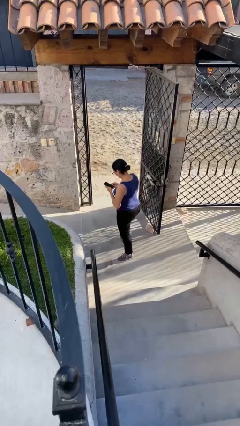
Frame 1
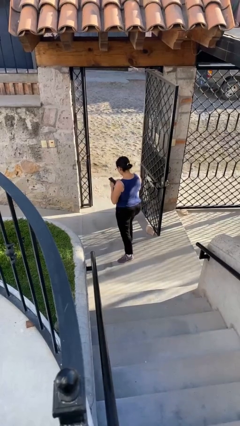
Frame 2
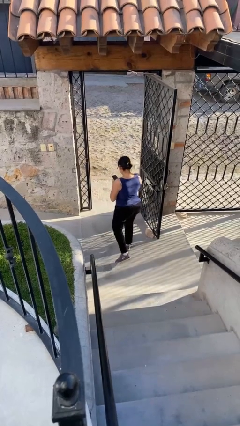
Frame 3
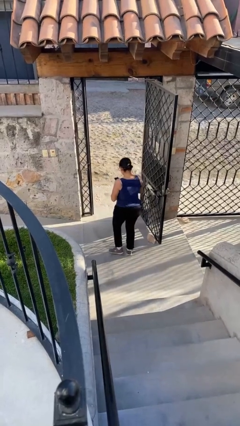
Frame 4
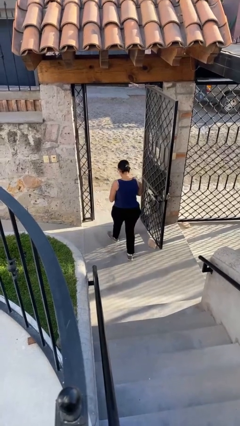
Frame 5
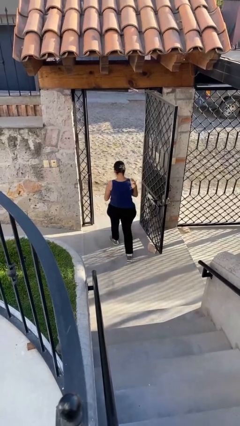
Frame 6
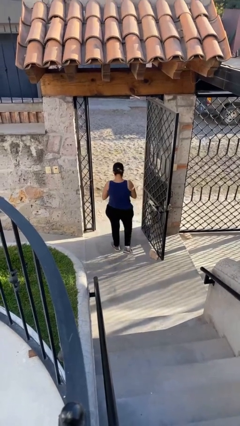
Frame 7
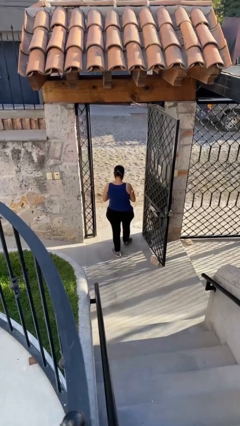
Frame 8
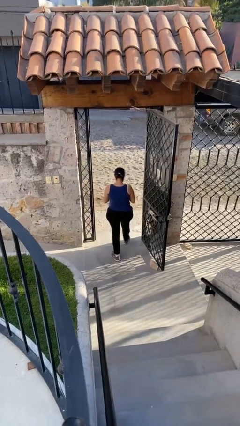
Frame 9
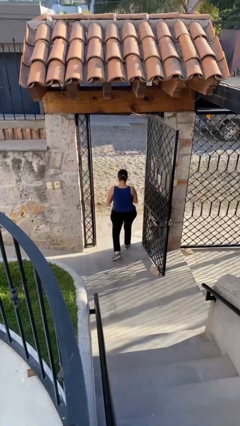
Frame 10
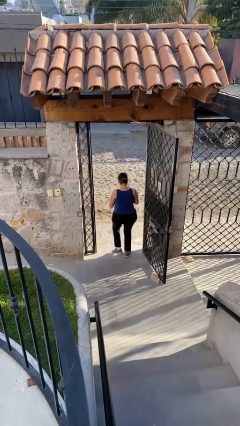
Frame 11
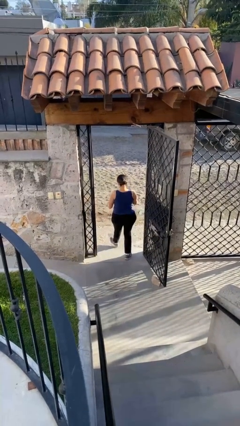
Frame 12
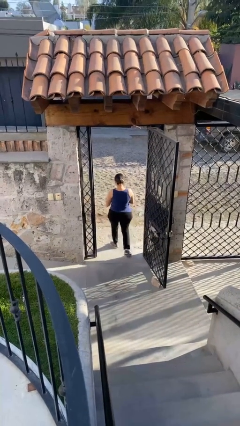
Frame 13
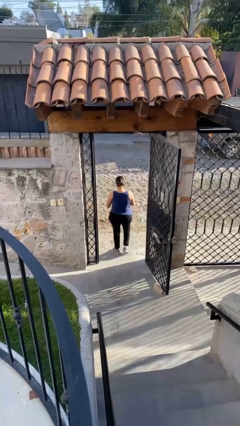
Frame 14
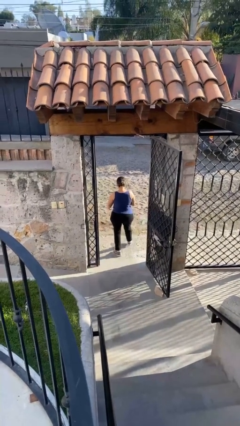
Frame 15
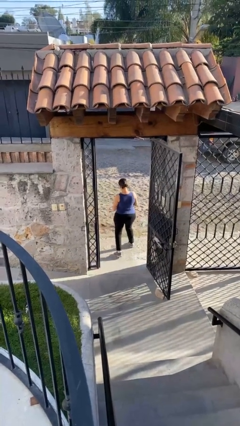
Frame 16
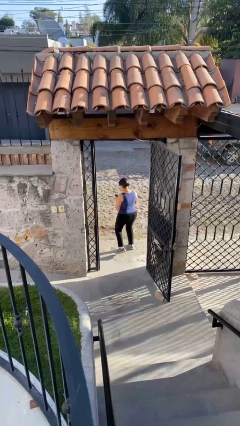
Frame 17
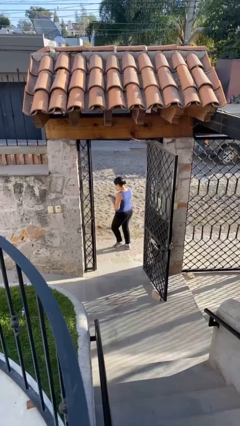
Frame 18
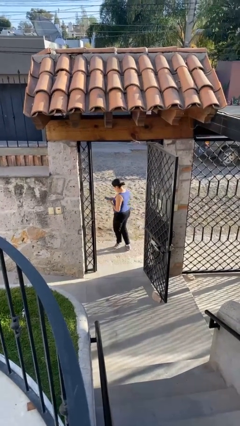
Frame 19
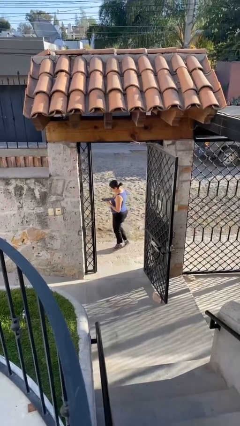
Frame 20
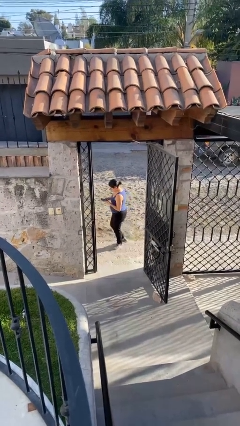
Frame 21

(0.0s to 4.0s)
person exits scene through structure

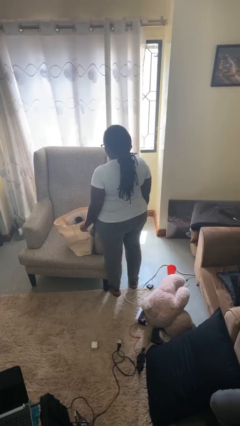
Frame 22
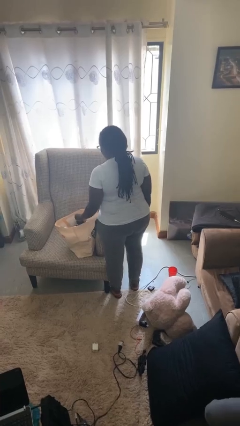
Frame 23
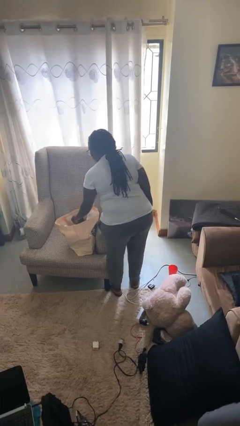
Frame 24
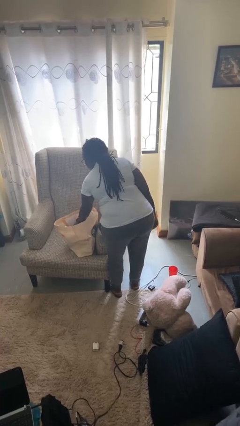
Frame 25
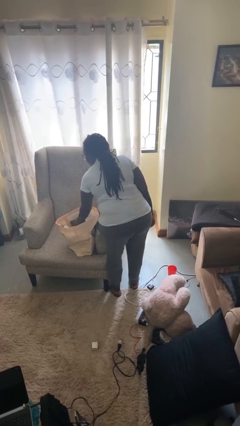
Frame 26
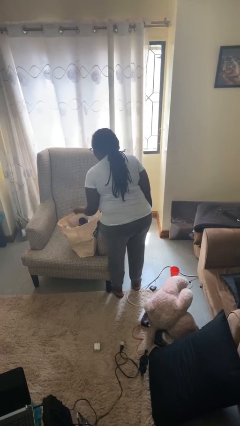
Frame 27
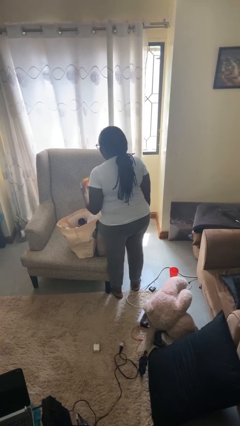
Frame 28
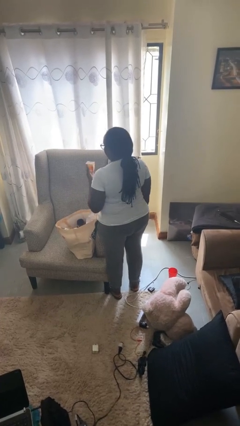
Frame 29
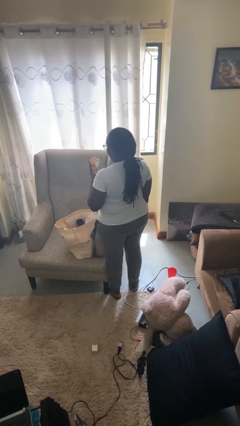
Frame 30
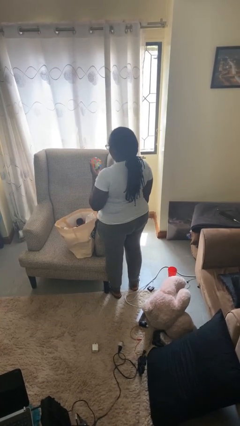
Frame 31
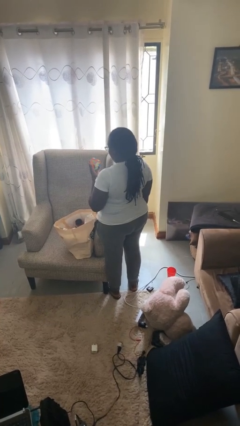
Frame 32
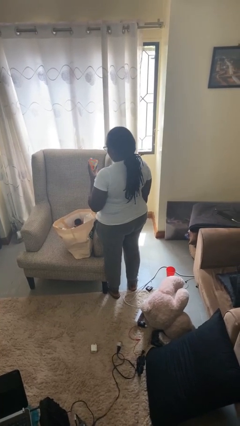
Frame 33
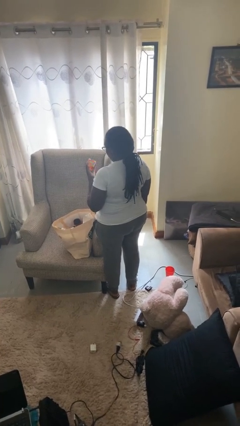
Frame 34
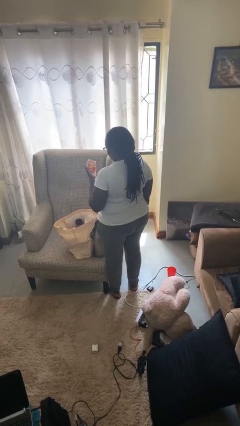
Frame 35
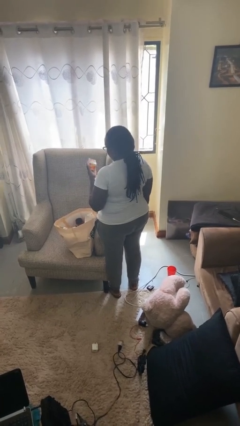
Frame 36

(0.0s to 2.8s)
person takes object from bag

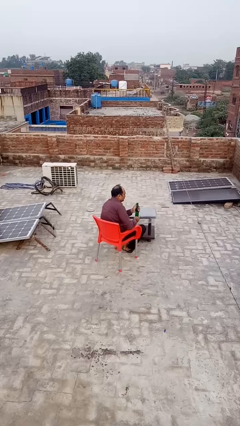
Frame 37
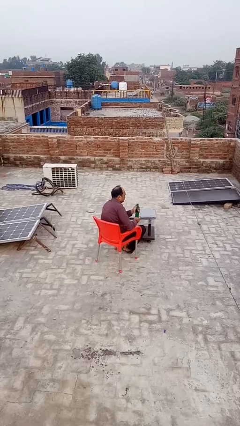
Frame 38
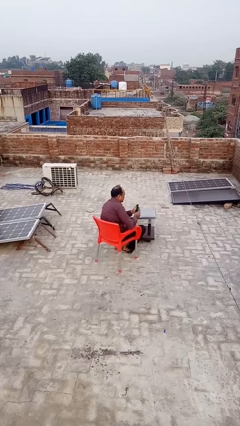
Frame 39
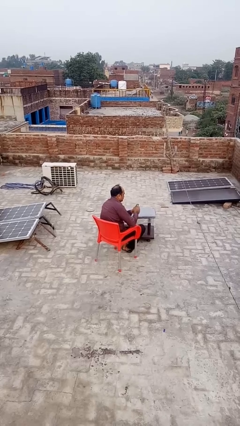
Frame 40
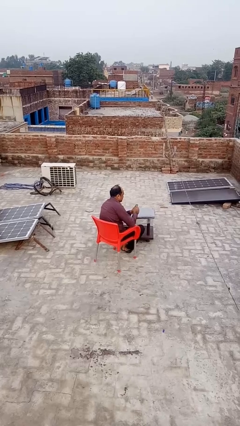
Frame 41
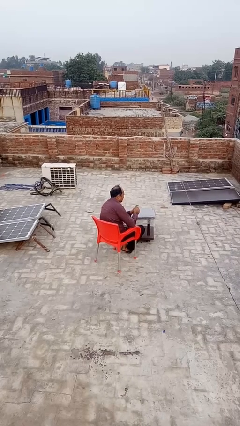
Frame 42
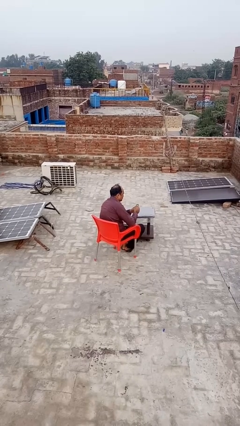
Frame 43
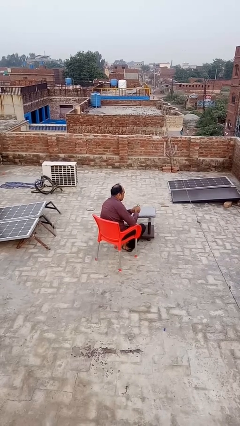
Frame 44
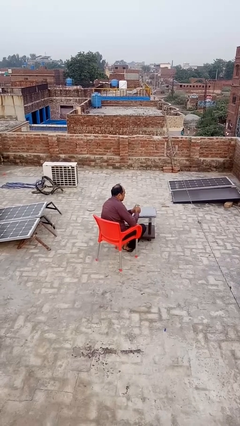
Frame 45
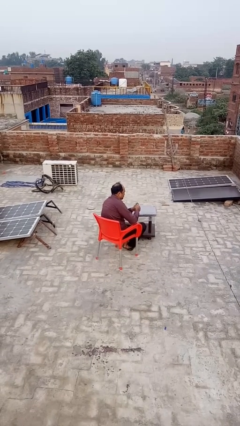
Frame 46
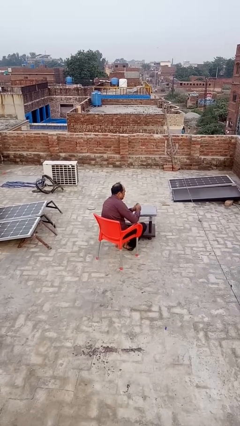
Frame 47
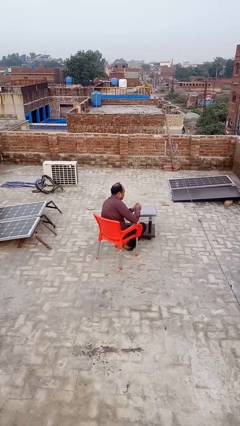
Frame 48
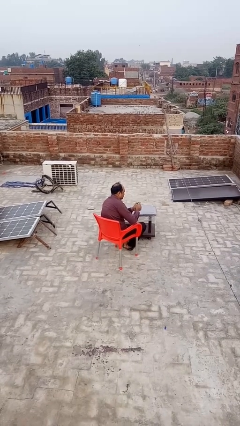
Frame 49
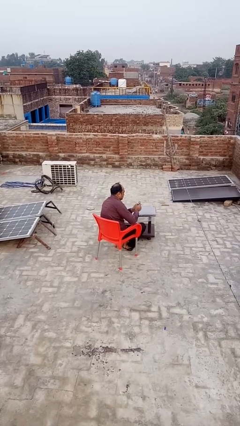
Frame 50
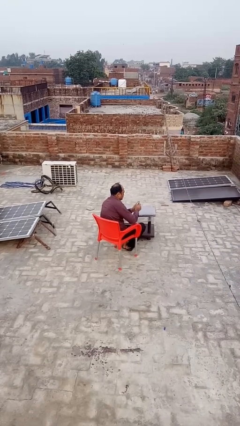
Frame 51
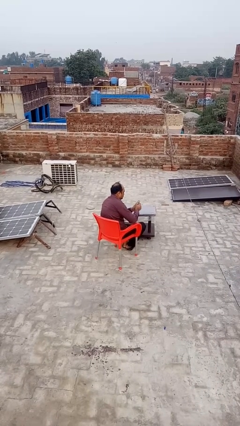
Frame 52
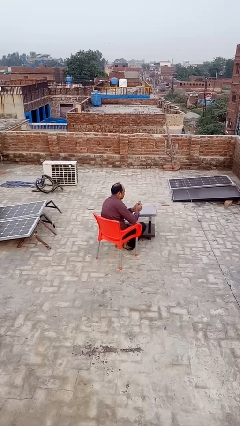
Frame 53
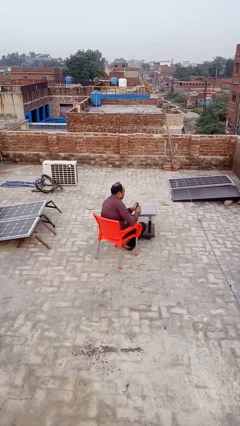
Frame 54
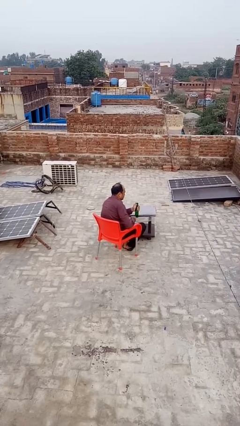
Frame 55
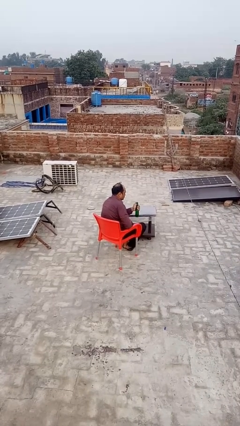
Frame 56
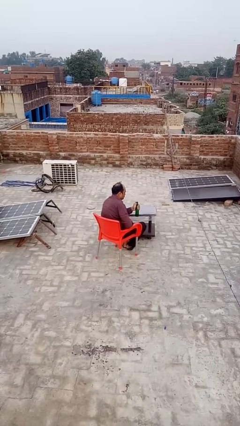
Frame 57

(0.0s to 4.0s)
person opens can with can opener

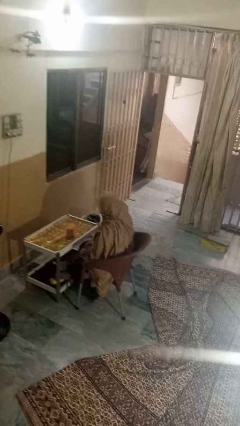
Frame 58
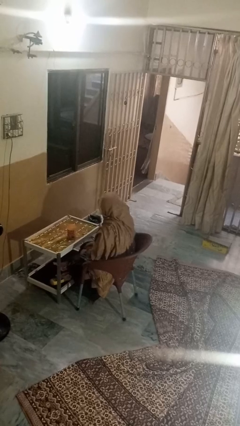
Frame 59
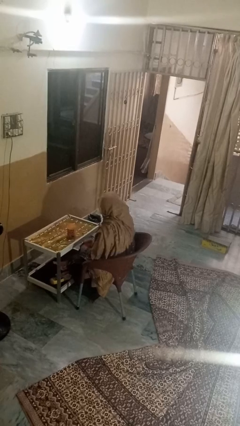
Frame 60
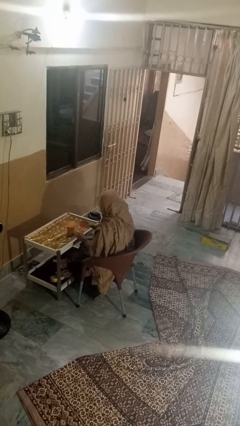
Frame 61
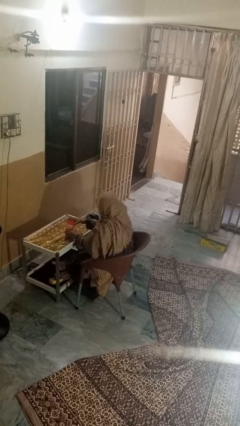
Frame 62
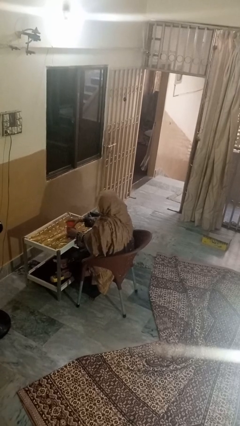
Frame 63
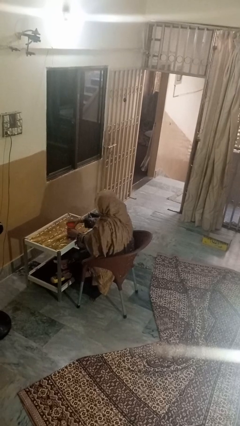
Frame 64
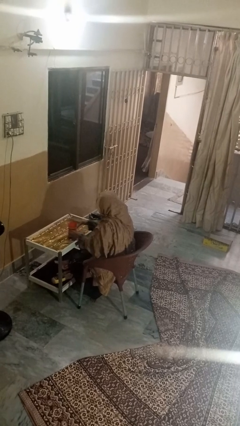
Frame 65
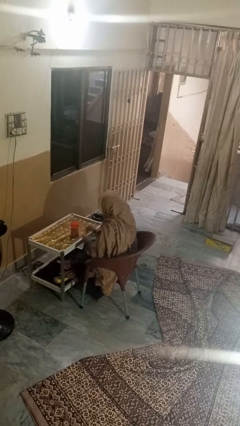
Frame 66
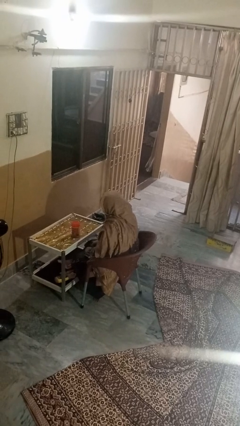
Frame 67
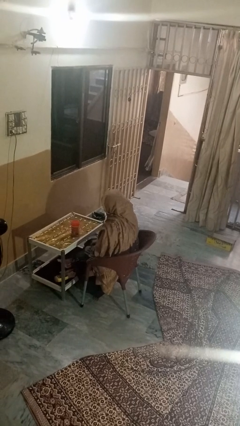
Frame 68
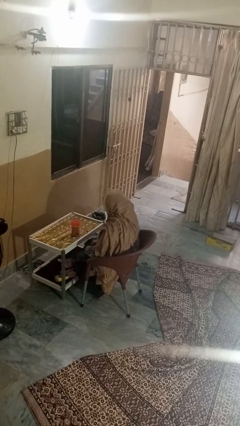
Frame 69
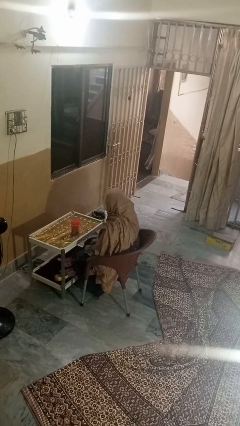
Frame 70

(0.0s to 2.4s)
person closes jar

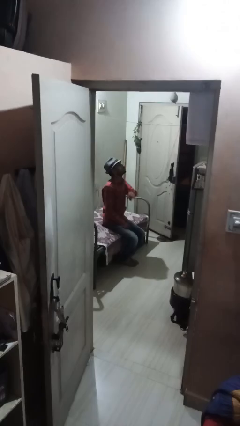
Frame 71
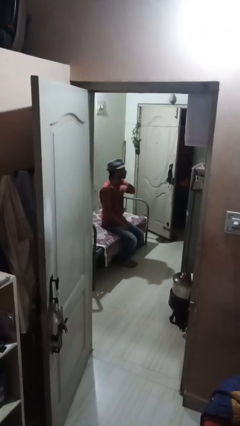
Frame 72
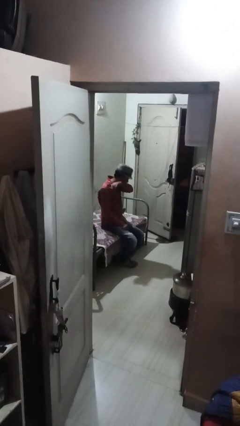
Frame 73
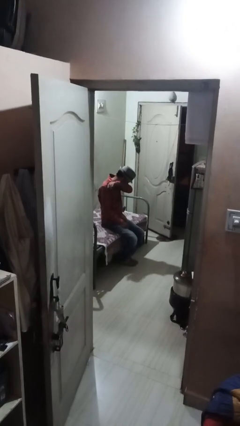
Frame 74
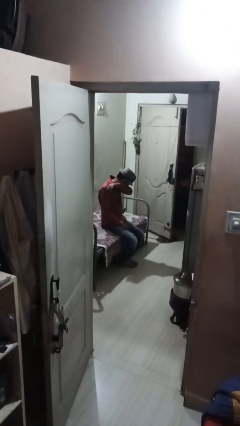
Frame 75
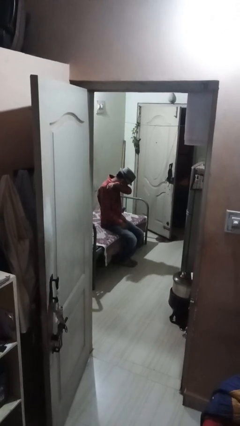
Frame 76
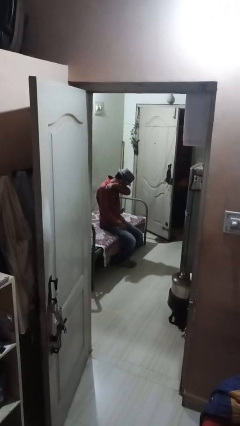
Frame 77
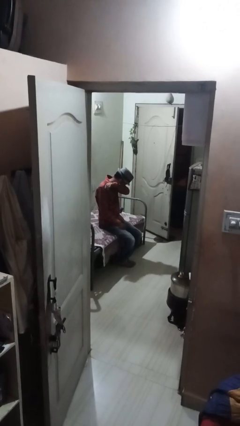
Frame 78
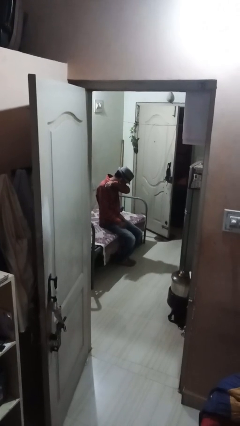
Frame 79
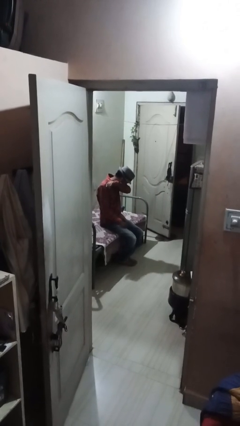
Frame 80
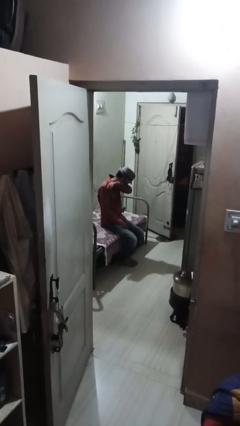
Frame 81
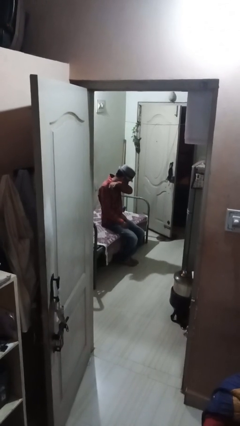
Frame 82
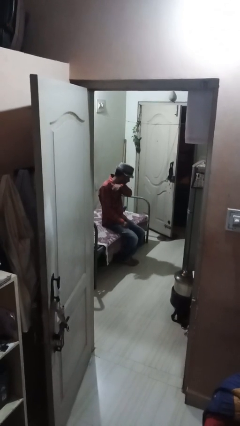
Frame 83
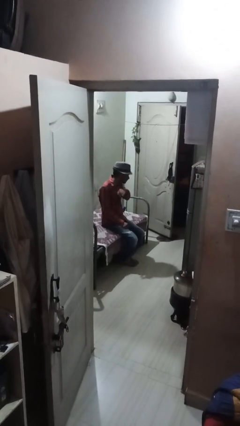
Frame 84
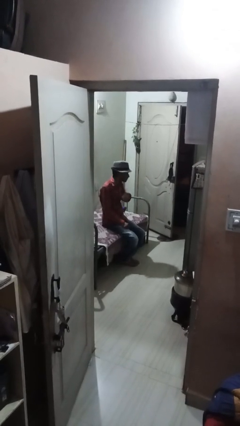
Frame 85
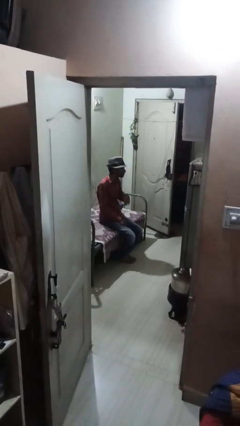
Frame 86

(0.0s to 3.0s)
person sneezes into arm

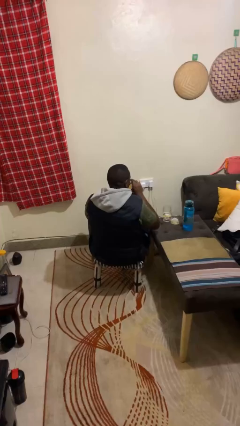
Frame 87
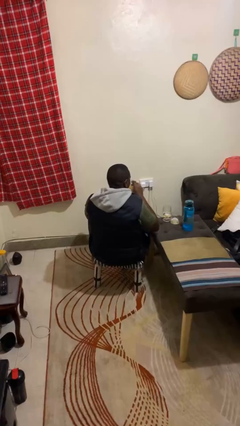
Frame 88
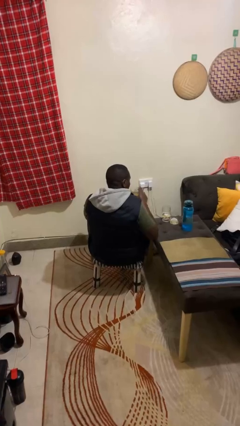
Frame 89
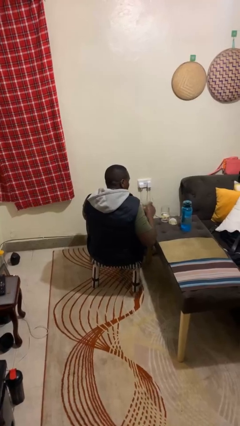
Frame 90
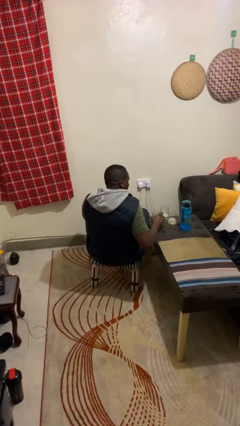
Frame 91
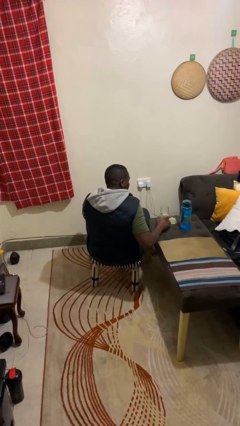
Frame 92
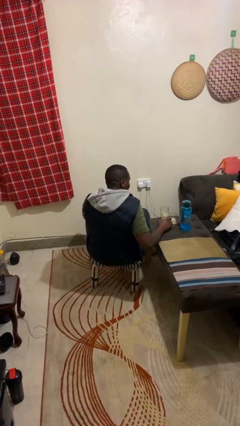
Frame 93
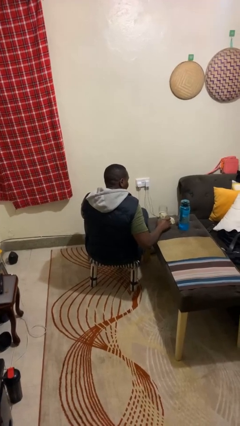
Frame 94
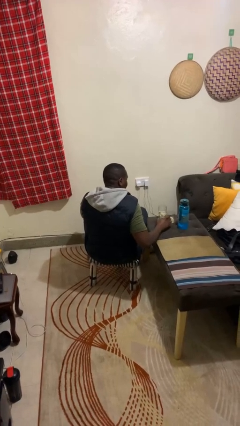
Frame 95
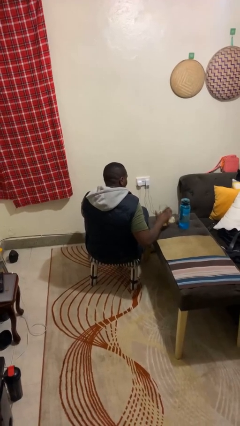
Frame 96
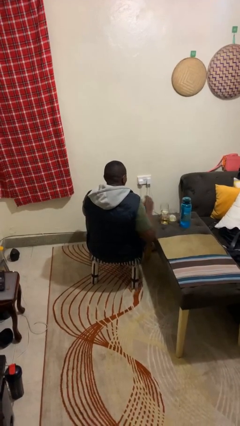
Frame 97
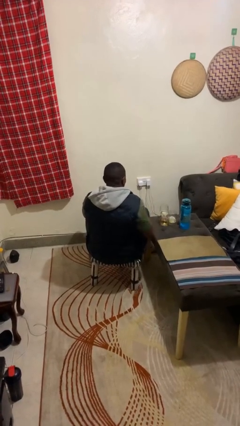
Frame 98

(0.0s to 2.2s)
person puts down object on table
